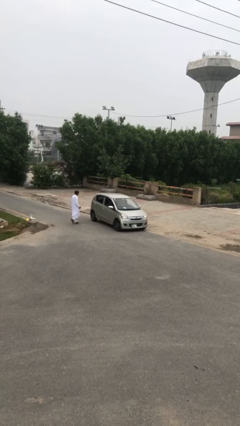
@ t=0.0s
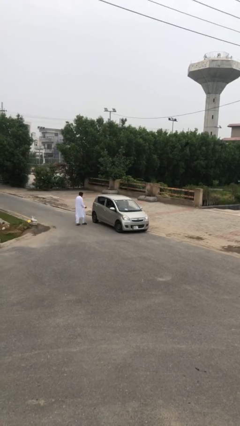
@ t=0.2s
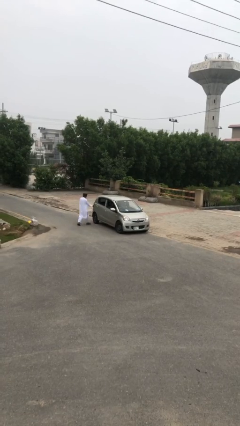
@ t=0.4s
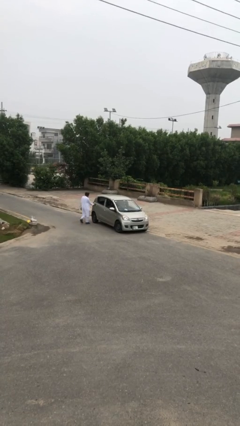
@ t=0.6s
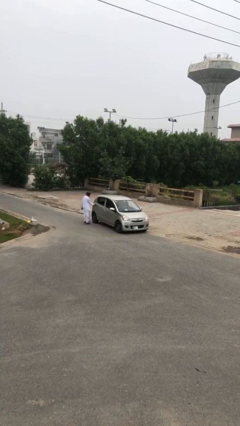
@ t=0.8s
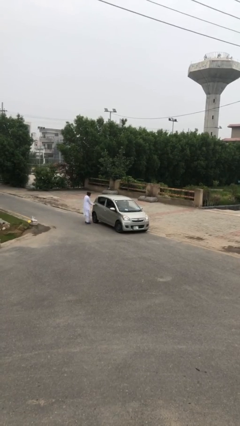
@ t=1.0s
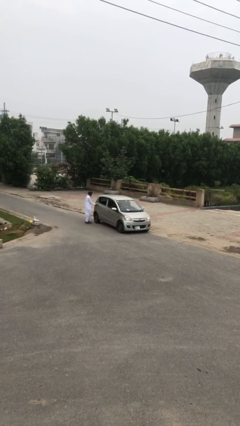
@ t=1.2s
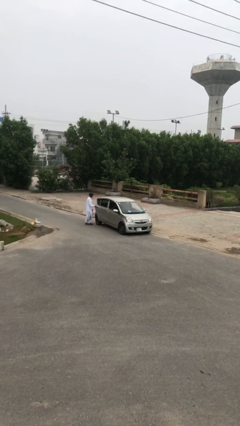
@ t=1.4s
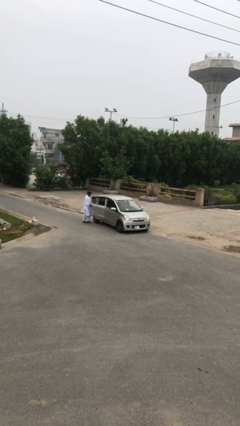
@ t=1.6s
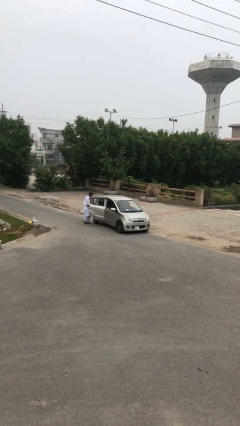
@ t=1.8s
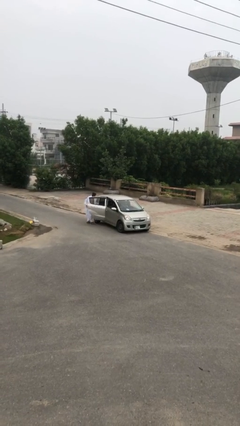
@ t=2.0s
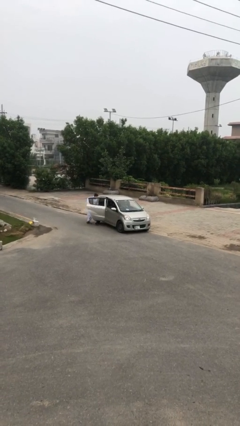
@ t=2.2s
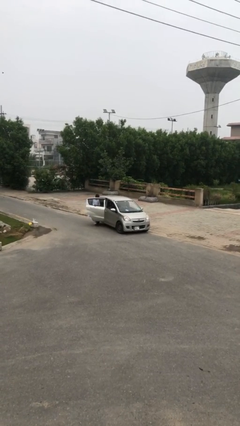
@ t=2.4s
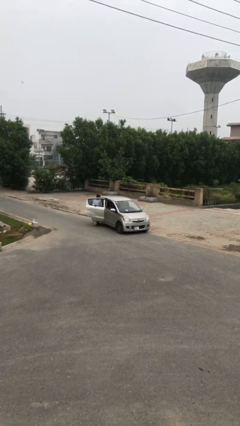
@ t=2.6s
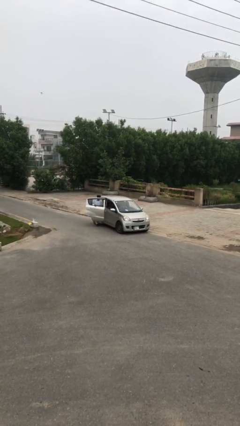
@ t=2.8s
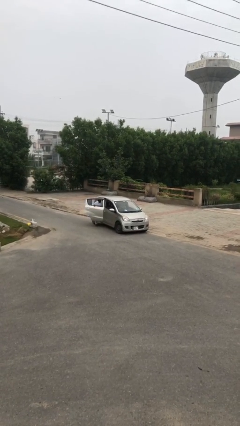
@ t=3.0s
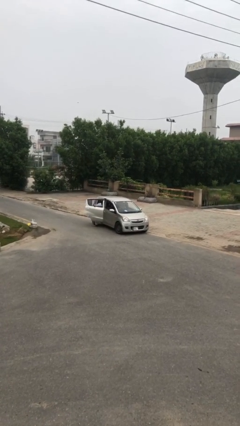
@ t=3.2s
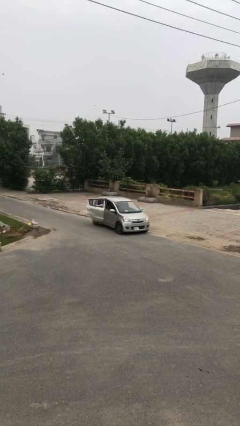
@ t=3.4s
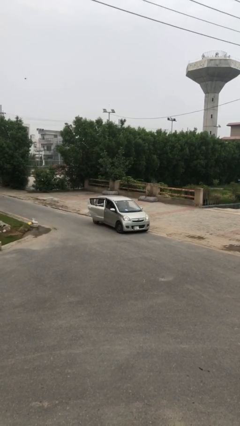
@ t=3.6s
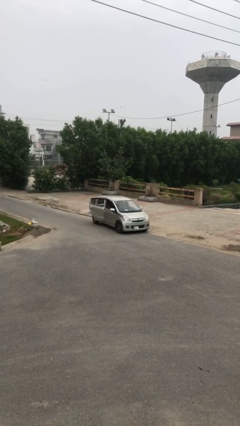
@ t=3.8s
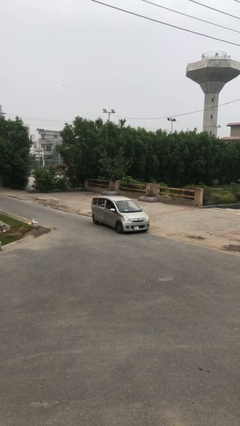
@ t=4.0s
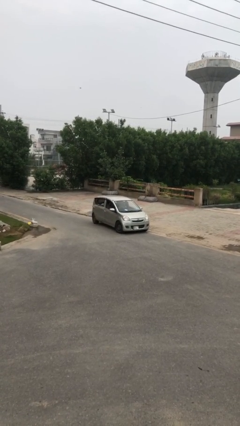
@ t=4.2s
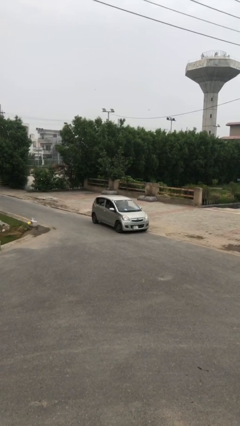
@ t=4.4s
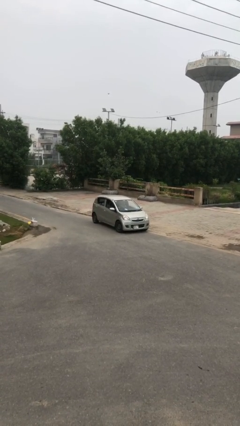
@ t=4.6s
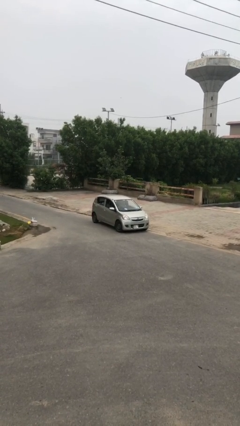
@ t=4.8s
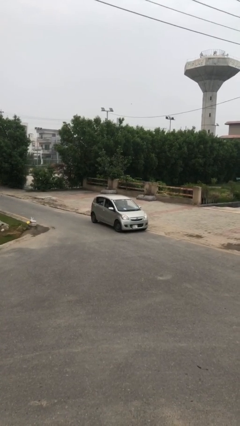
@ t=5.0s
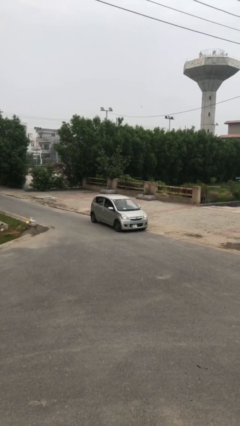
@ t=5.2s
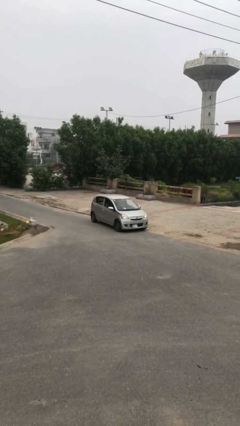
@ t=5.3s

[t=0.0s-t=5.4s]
car picks up person

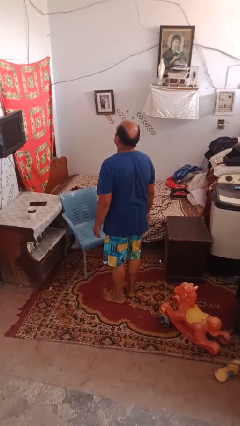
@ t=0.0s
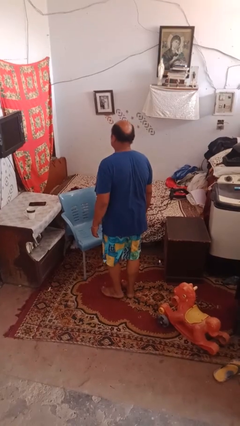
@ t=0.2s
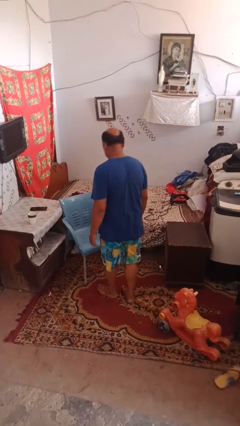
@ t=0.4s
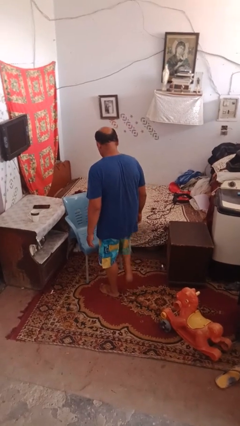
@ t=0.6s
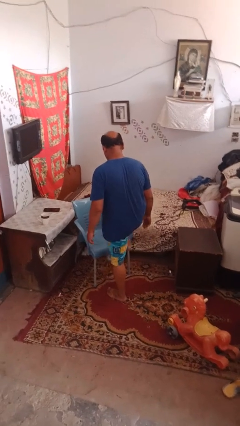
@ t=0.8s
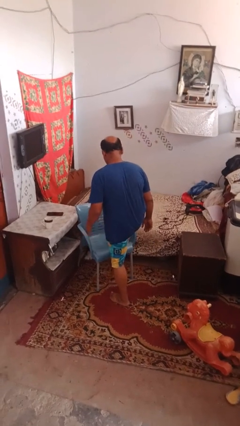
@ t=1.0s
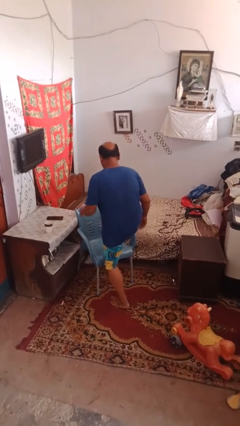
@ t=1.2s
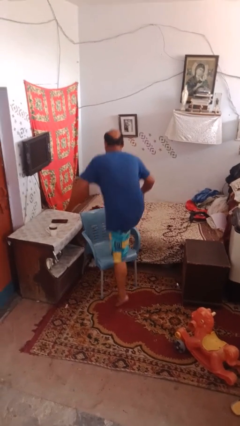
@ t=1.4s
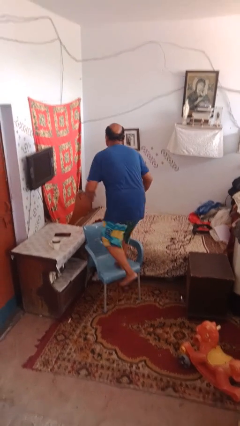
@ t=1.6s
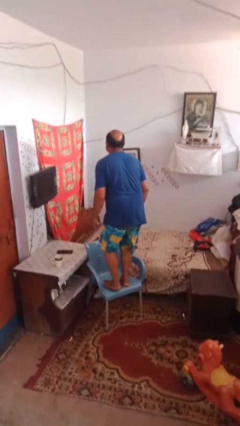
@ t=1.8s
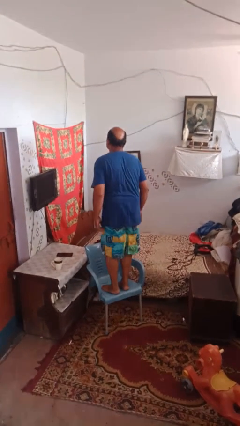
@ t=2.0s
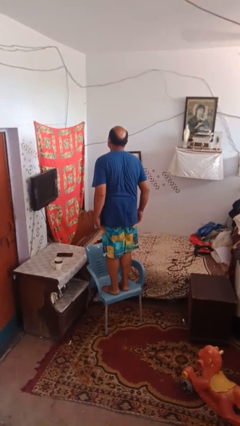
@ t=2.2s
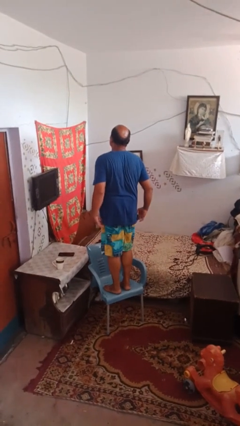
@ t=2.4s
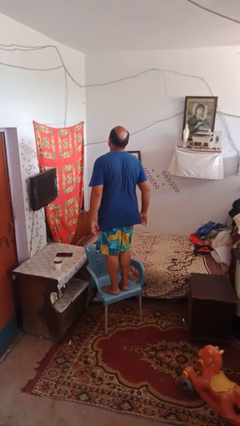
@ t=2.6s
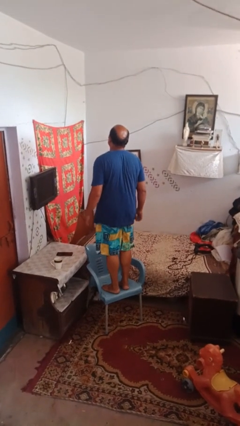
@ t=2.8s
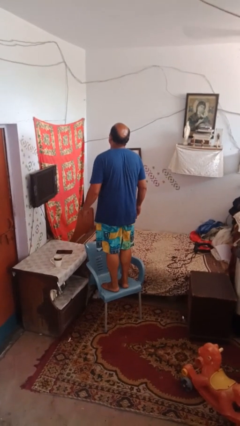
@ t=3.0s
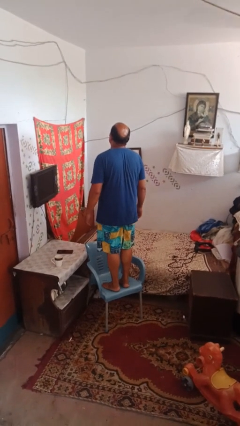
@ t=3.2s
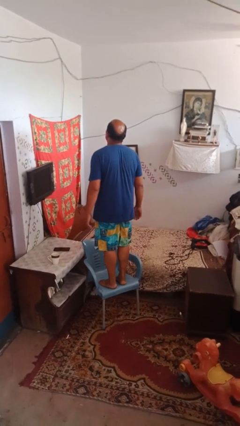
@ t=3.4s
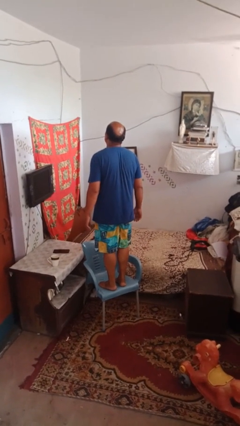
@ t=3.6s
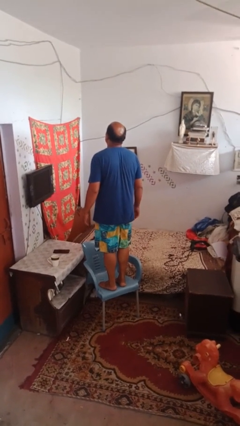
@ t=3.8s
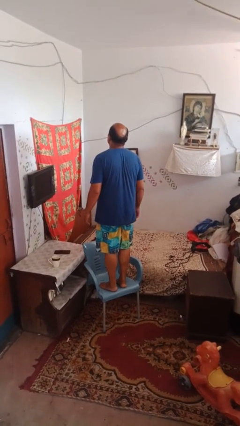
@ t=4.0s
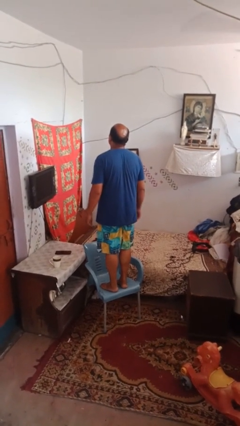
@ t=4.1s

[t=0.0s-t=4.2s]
person climbs on chair

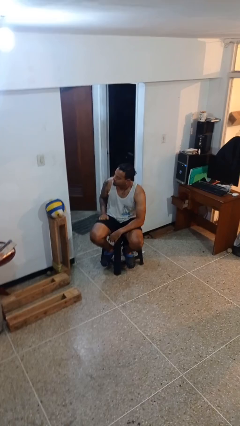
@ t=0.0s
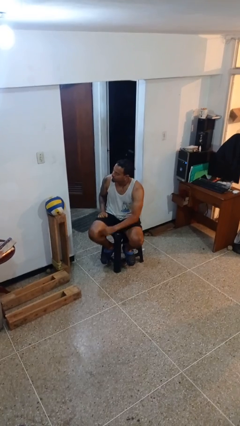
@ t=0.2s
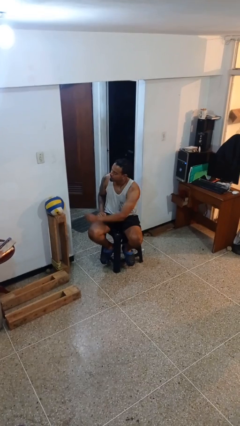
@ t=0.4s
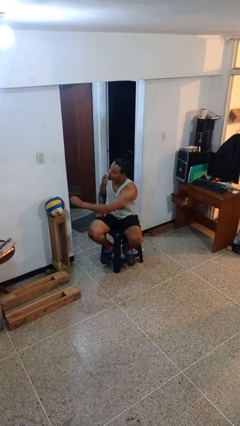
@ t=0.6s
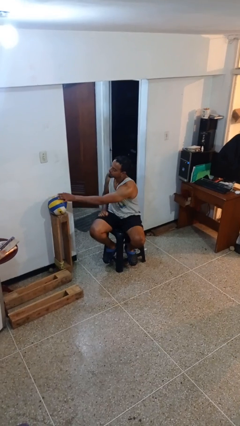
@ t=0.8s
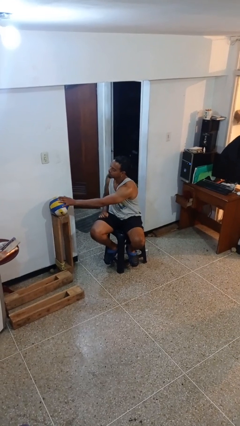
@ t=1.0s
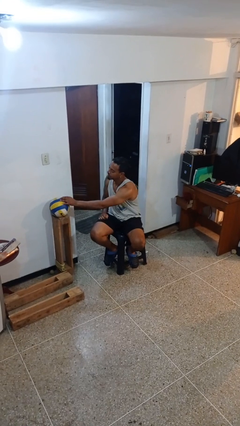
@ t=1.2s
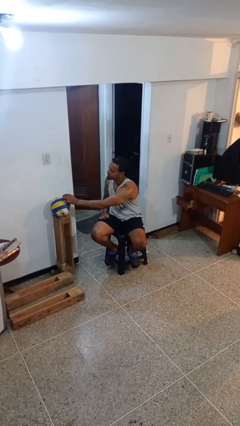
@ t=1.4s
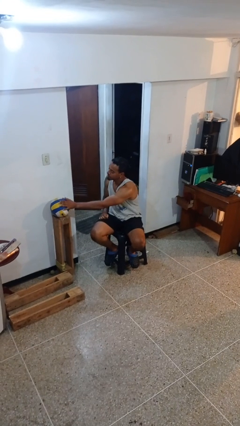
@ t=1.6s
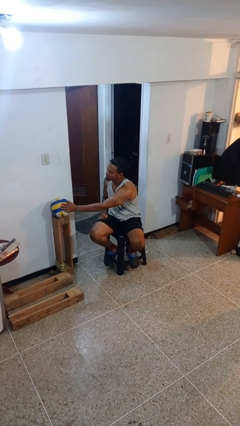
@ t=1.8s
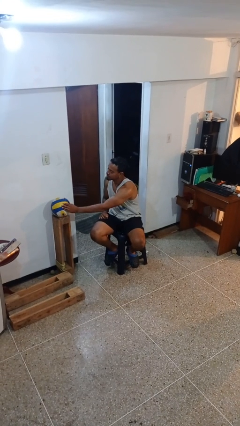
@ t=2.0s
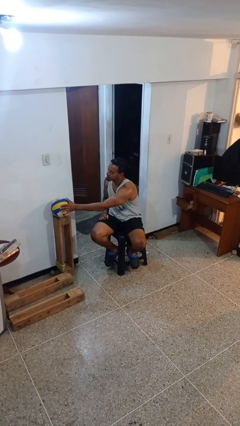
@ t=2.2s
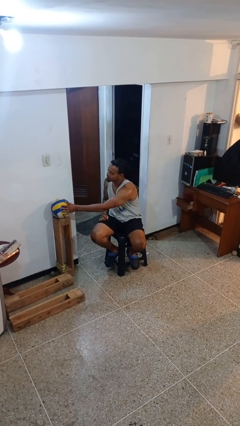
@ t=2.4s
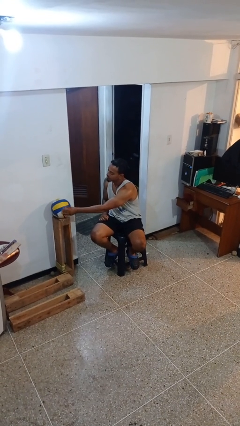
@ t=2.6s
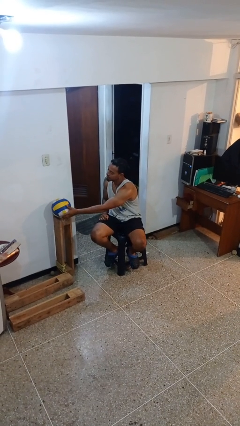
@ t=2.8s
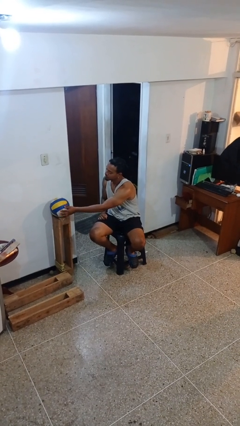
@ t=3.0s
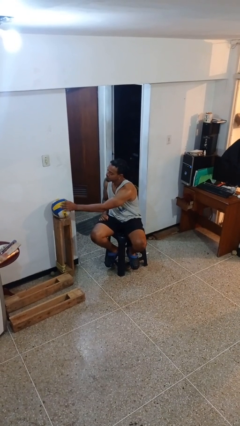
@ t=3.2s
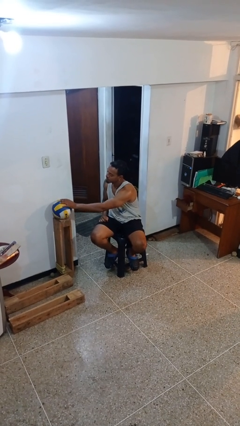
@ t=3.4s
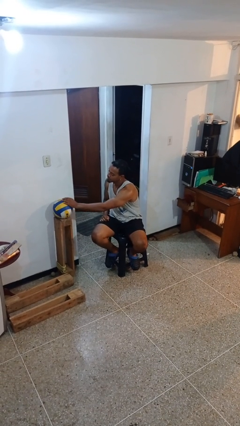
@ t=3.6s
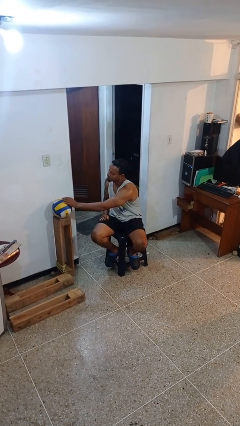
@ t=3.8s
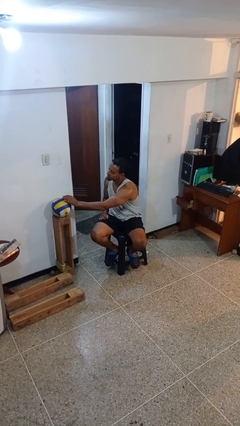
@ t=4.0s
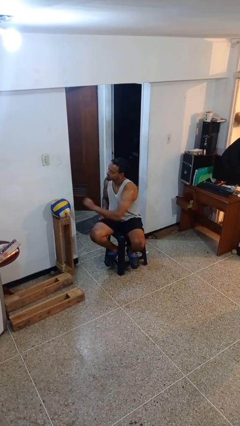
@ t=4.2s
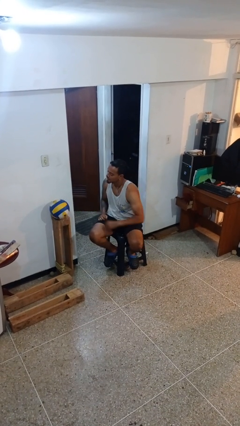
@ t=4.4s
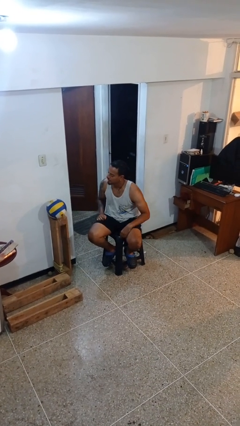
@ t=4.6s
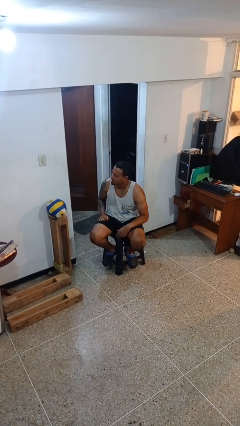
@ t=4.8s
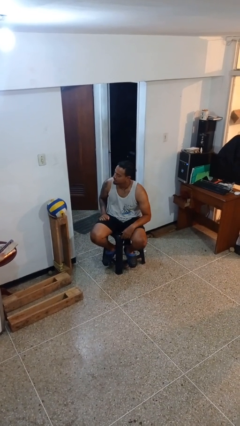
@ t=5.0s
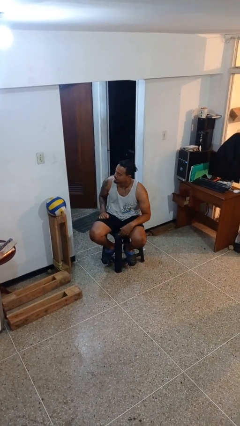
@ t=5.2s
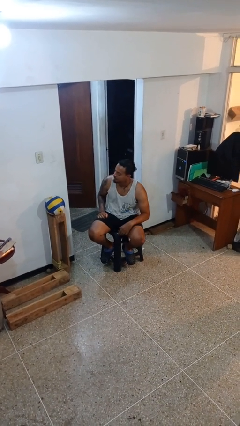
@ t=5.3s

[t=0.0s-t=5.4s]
person waves hand over object

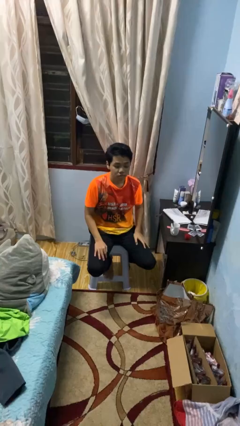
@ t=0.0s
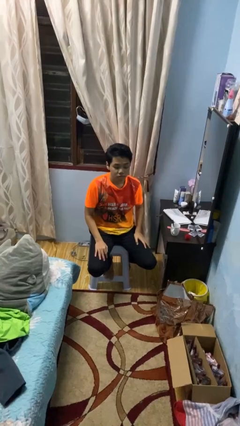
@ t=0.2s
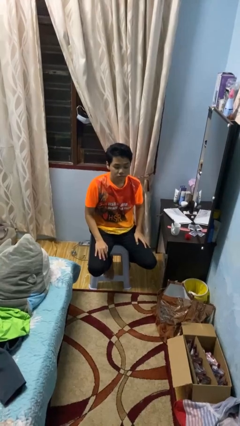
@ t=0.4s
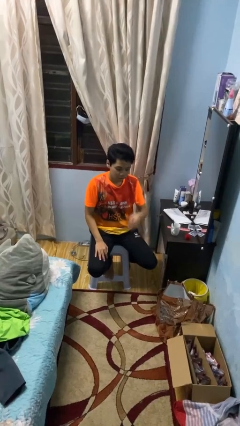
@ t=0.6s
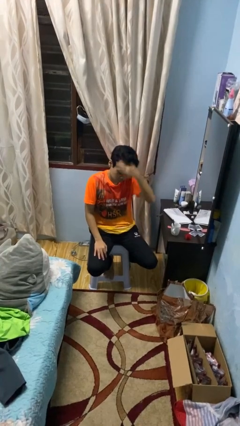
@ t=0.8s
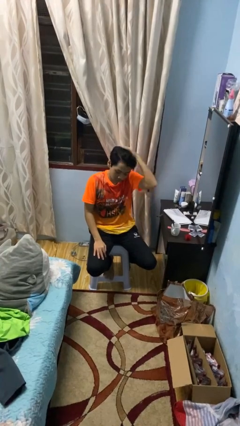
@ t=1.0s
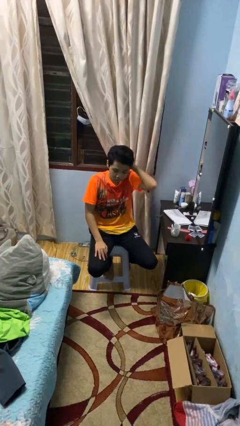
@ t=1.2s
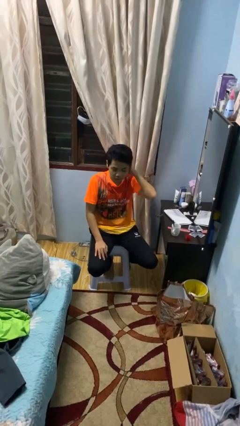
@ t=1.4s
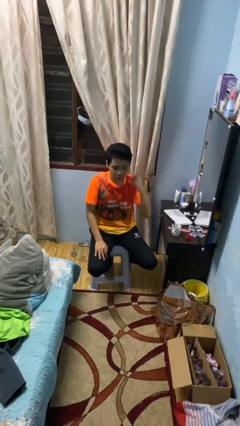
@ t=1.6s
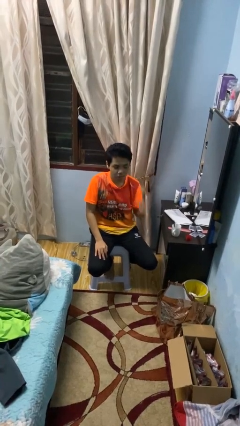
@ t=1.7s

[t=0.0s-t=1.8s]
person strokes hair

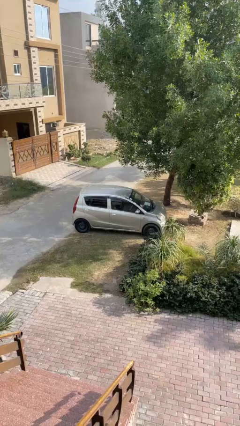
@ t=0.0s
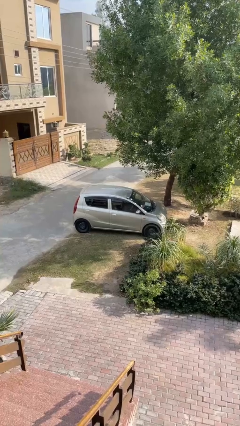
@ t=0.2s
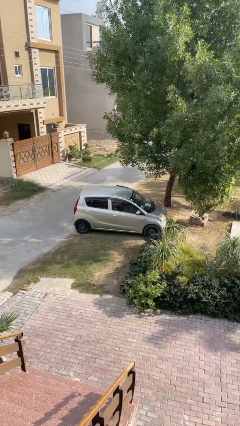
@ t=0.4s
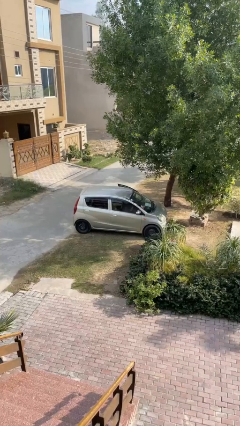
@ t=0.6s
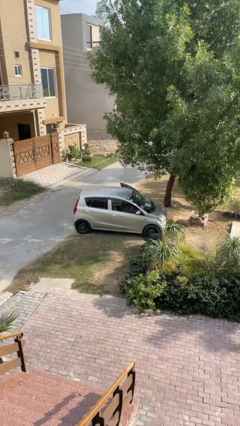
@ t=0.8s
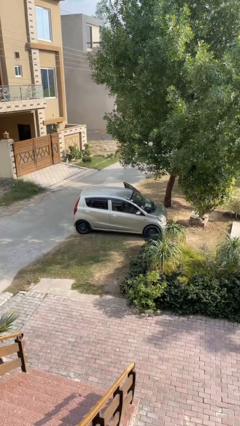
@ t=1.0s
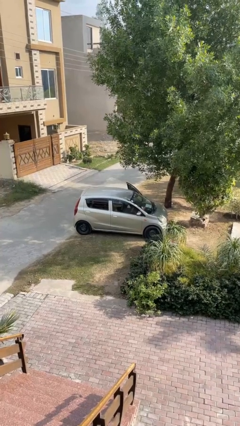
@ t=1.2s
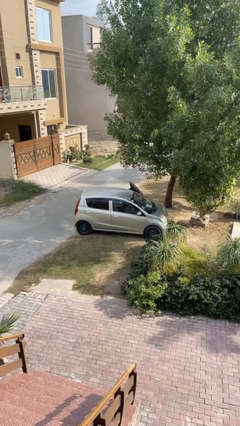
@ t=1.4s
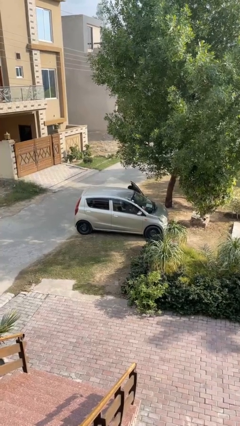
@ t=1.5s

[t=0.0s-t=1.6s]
car drops off person
